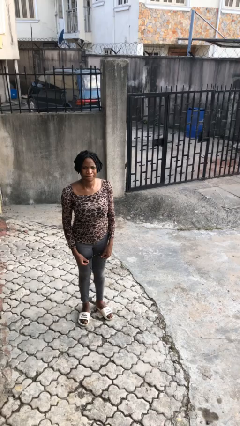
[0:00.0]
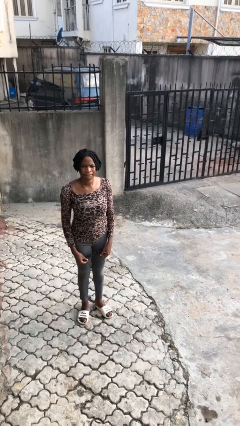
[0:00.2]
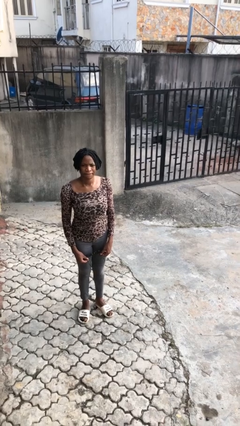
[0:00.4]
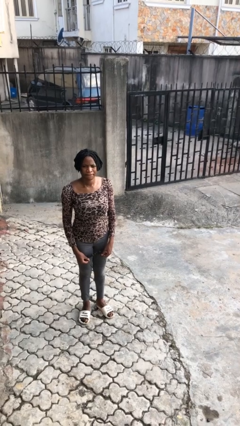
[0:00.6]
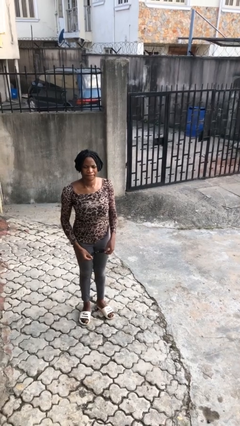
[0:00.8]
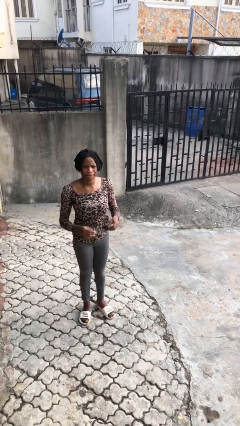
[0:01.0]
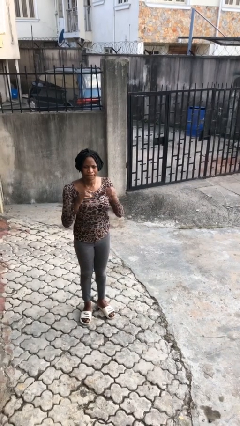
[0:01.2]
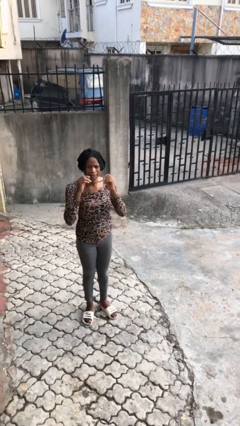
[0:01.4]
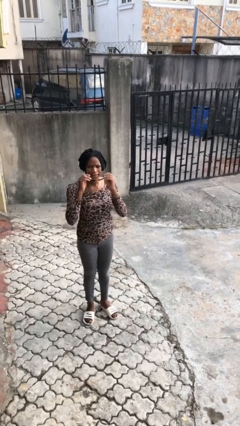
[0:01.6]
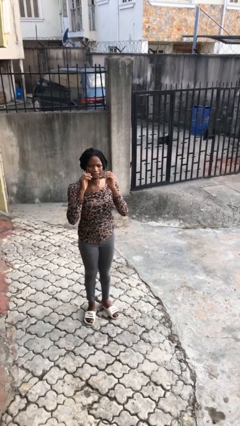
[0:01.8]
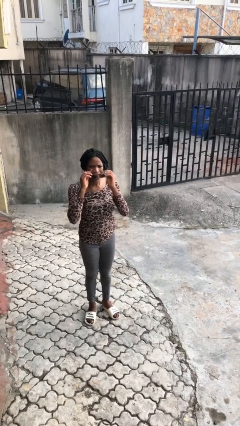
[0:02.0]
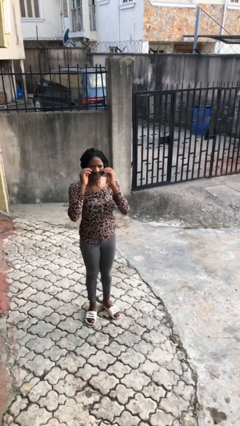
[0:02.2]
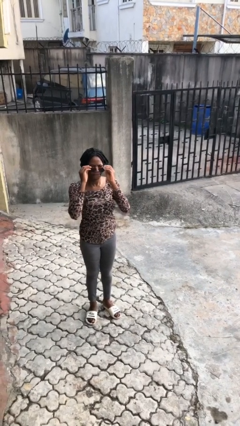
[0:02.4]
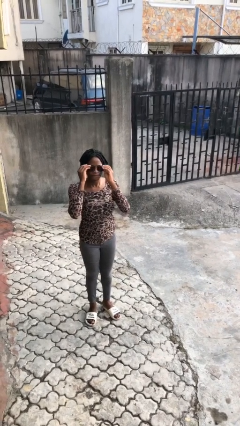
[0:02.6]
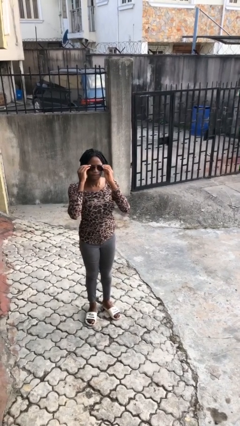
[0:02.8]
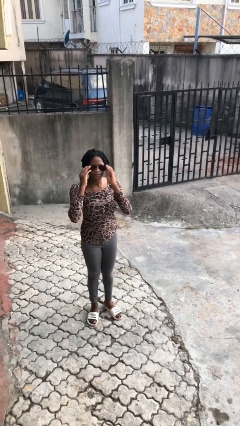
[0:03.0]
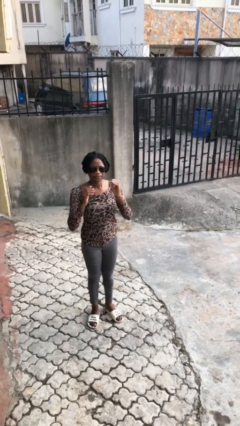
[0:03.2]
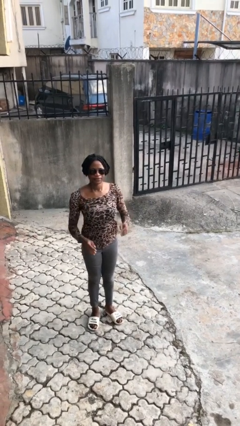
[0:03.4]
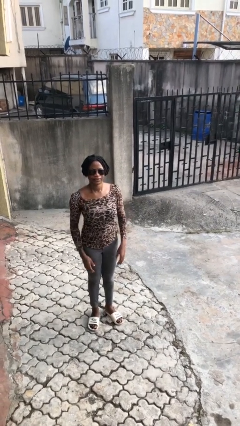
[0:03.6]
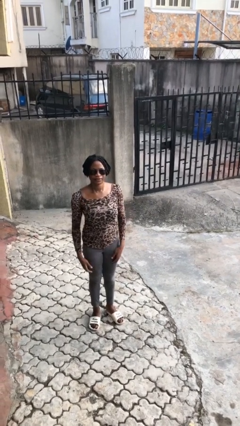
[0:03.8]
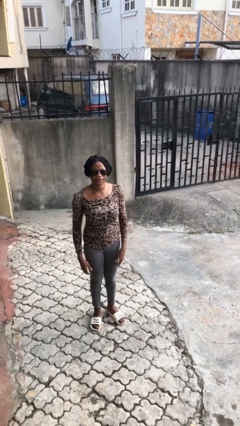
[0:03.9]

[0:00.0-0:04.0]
person puts on sunglasses

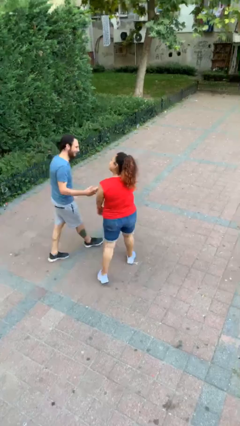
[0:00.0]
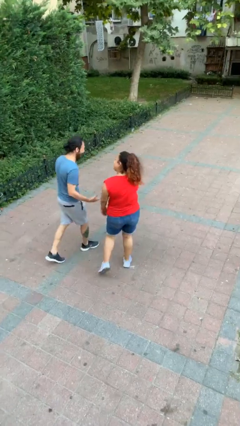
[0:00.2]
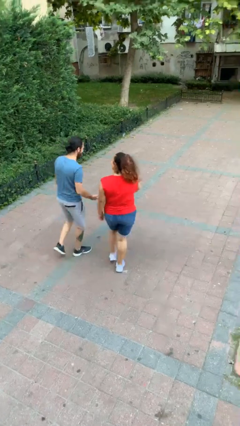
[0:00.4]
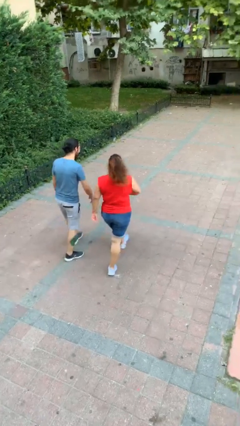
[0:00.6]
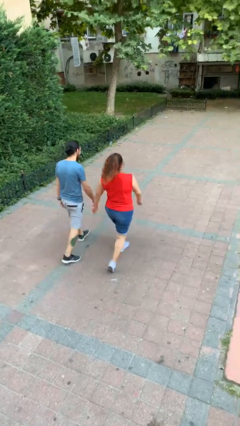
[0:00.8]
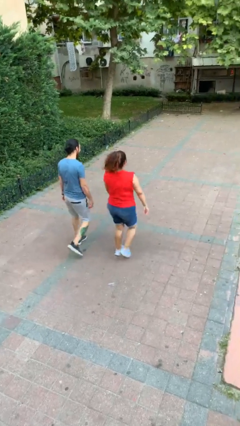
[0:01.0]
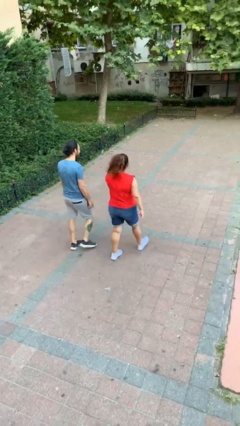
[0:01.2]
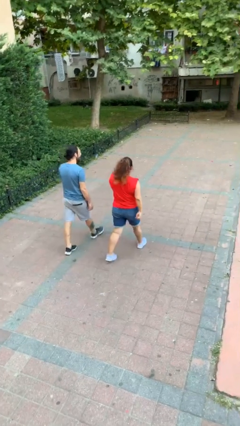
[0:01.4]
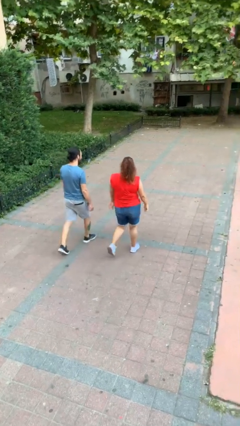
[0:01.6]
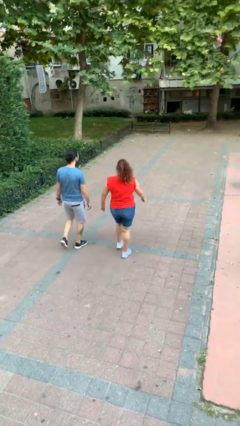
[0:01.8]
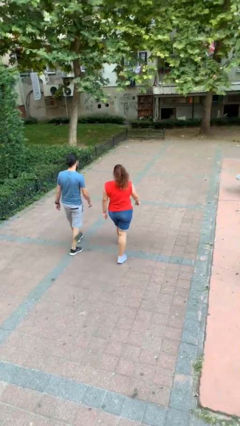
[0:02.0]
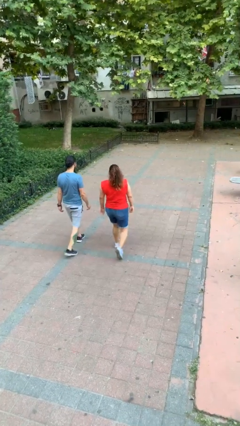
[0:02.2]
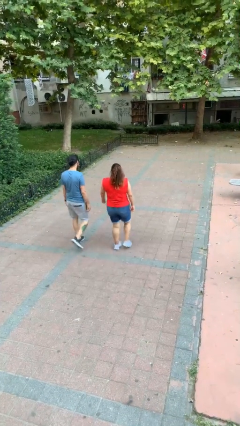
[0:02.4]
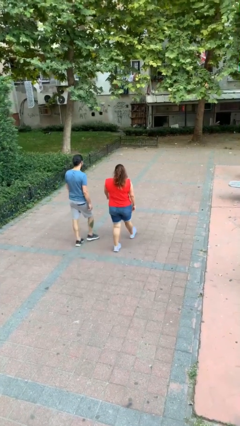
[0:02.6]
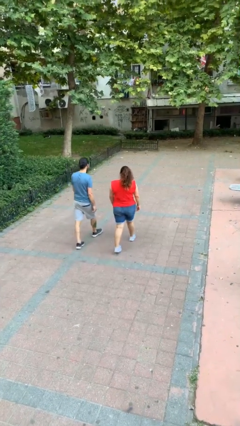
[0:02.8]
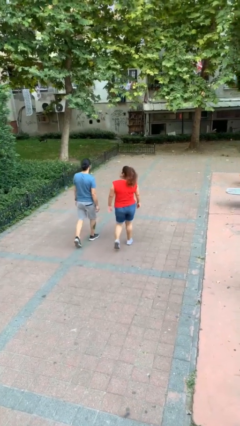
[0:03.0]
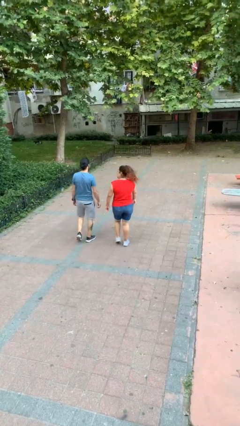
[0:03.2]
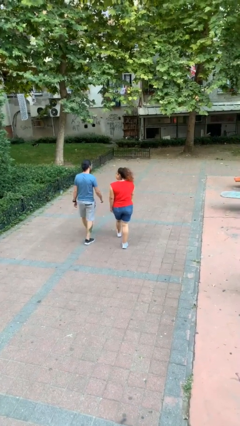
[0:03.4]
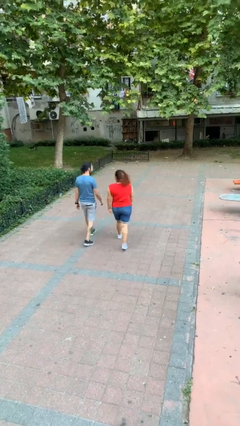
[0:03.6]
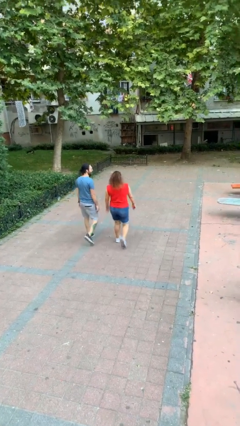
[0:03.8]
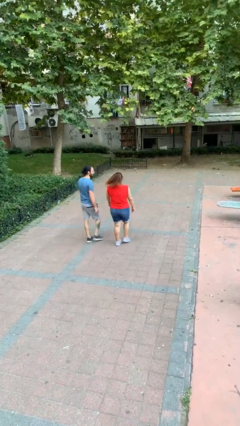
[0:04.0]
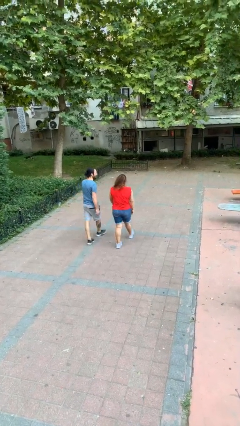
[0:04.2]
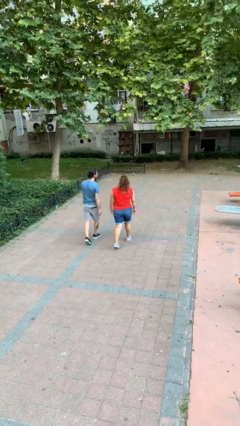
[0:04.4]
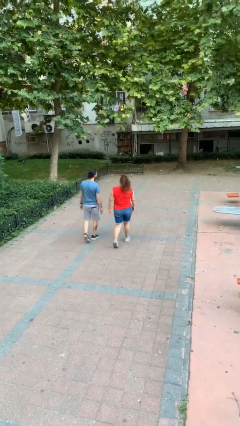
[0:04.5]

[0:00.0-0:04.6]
person talks to person

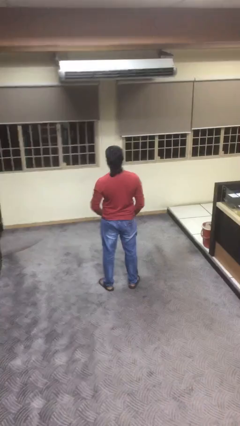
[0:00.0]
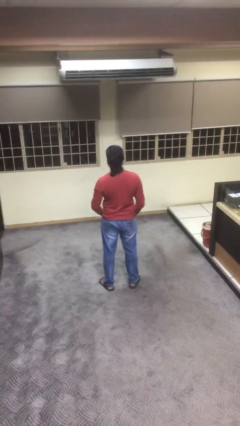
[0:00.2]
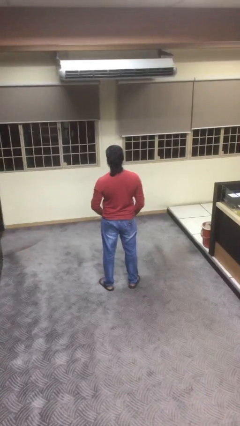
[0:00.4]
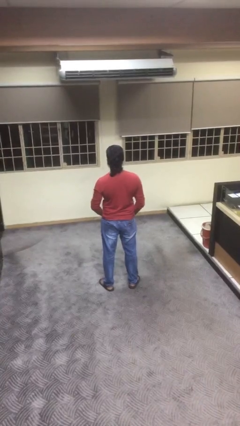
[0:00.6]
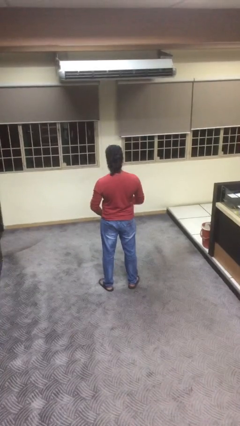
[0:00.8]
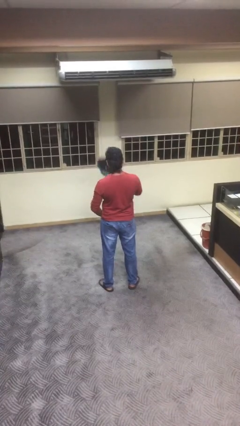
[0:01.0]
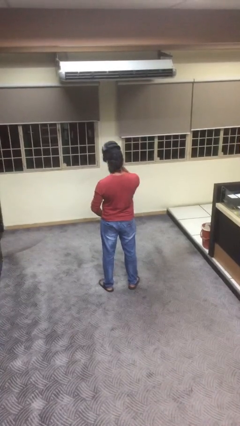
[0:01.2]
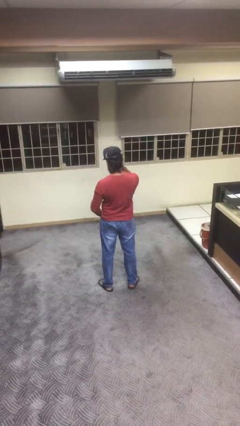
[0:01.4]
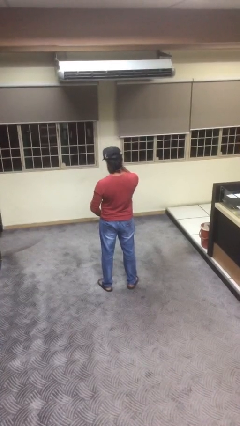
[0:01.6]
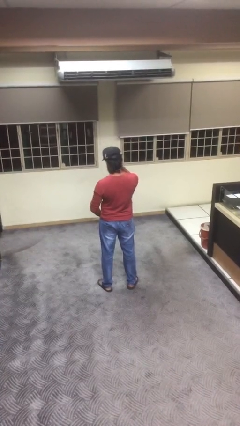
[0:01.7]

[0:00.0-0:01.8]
person puts on hat

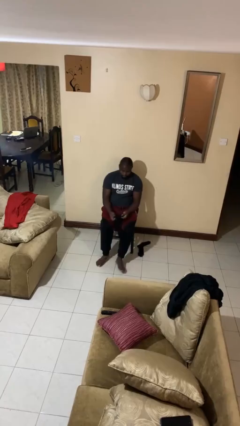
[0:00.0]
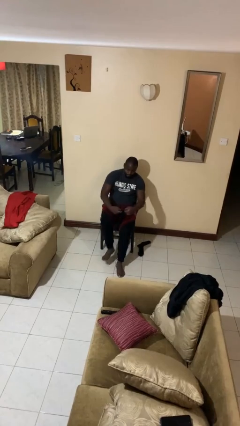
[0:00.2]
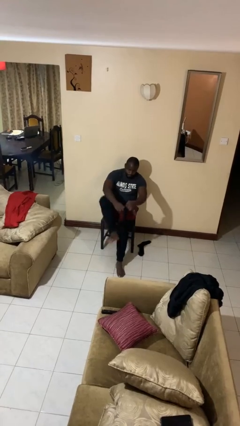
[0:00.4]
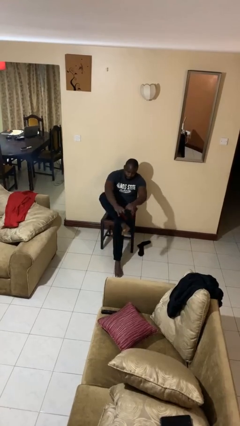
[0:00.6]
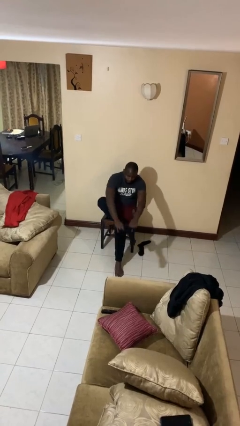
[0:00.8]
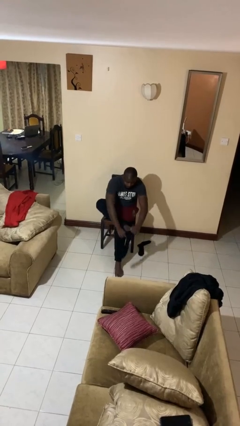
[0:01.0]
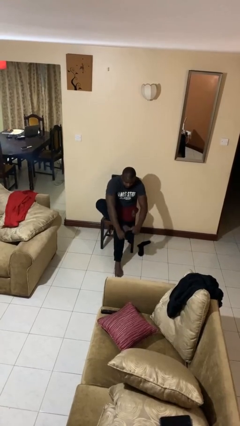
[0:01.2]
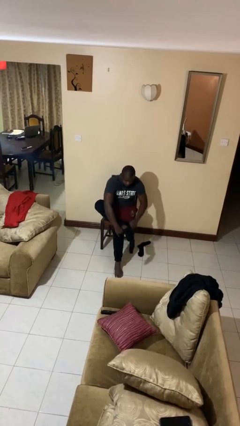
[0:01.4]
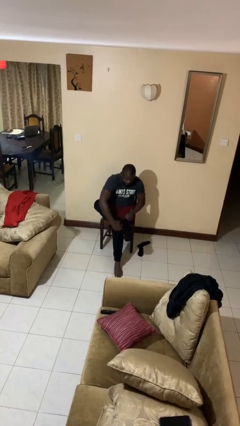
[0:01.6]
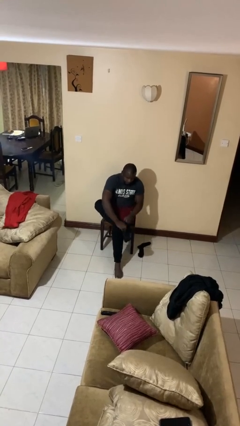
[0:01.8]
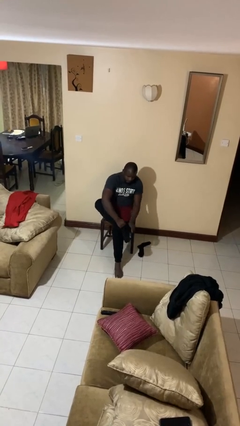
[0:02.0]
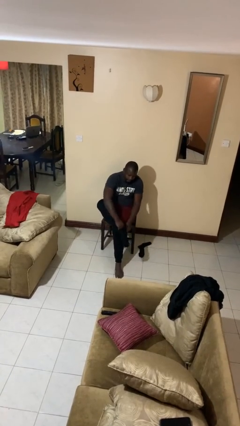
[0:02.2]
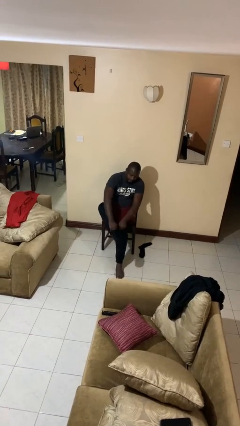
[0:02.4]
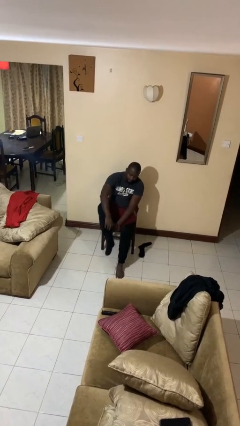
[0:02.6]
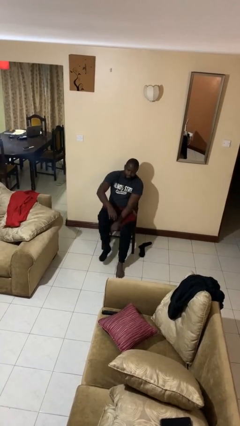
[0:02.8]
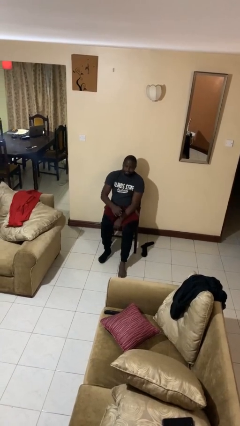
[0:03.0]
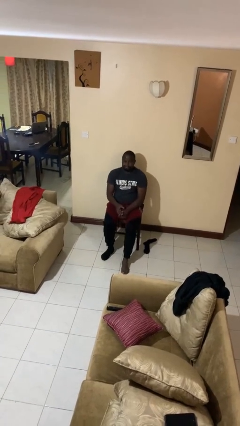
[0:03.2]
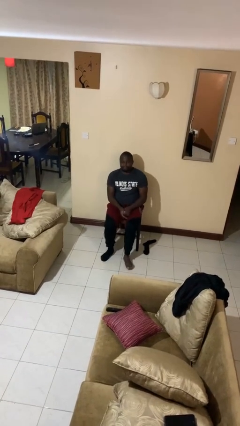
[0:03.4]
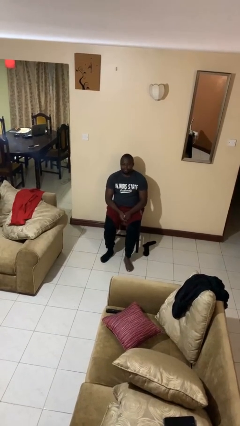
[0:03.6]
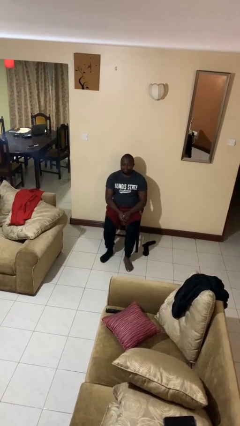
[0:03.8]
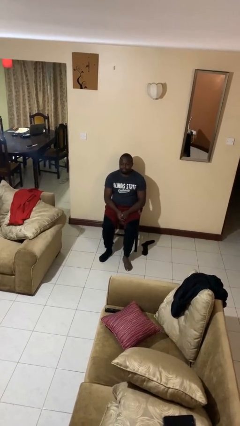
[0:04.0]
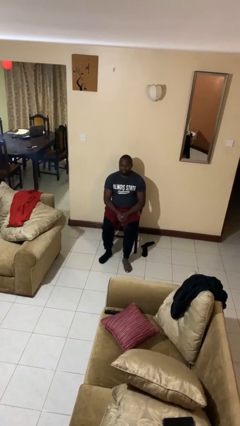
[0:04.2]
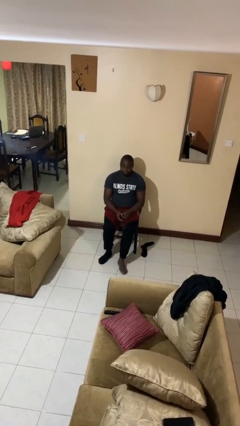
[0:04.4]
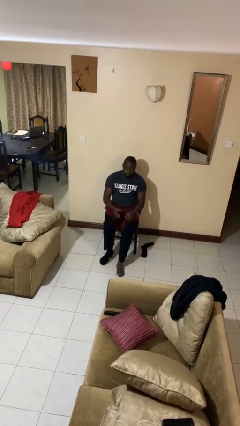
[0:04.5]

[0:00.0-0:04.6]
person puts on socks

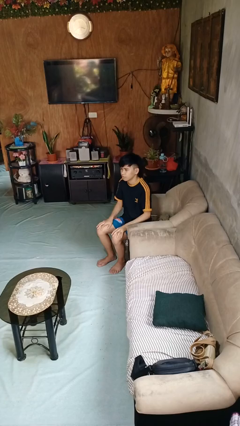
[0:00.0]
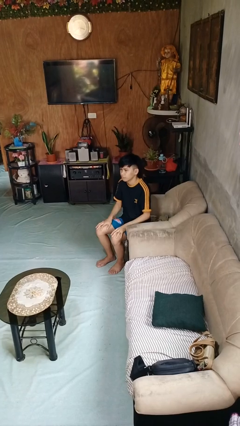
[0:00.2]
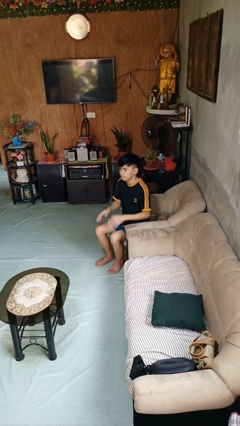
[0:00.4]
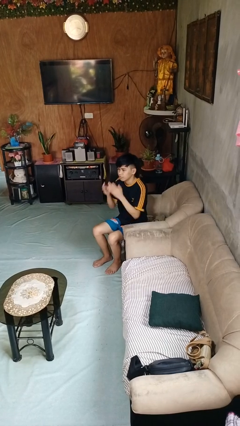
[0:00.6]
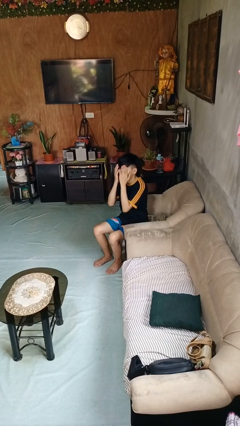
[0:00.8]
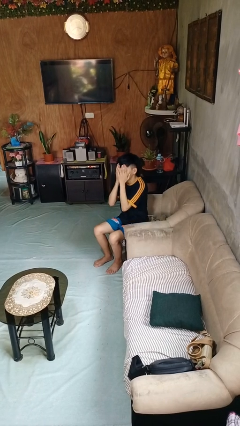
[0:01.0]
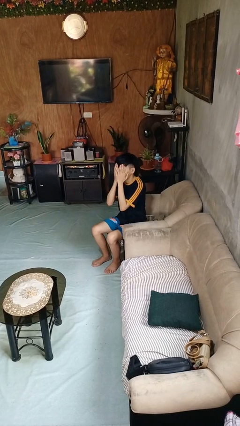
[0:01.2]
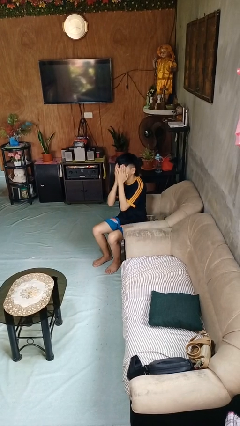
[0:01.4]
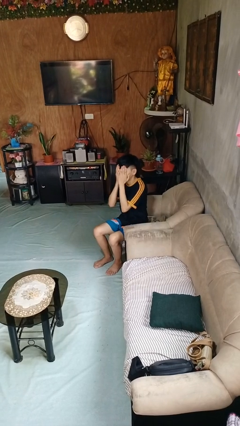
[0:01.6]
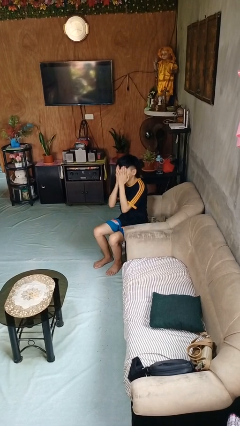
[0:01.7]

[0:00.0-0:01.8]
person covers face with hands

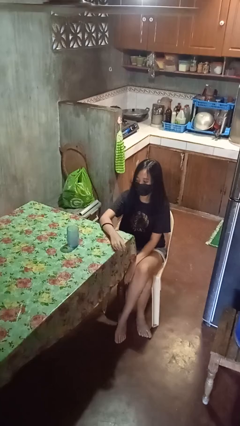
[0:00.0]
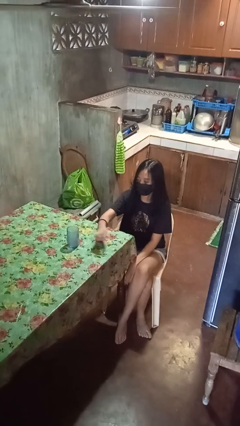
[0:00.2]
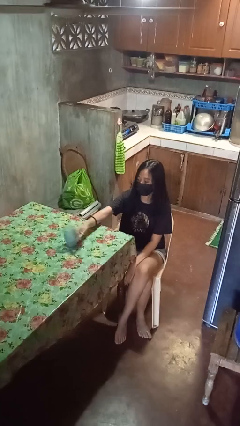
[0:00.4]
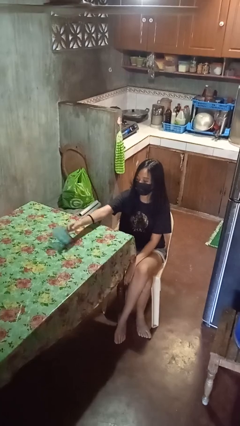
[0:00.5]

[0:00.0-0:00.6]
person knocks over glass

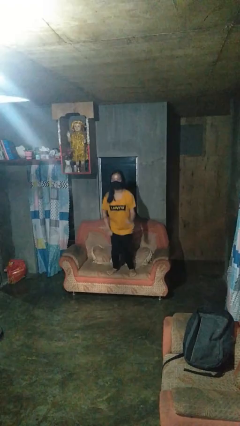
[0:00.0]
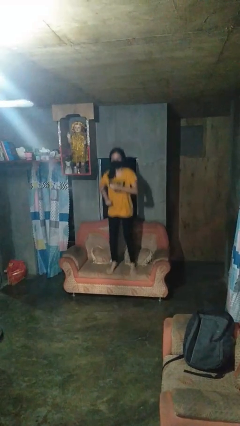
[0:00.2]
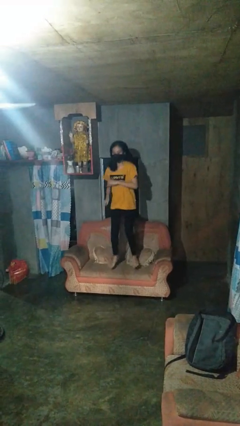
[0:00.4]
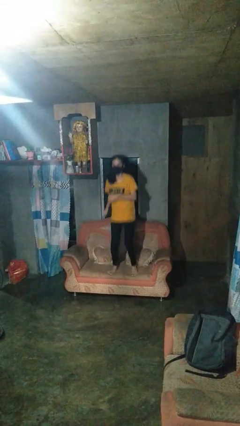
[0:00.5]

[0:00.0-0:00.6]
person jumps on couch
